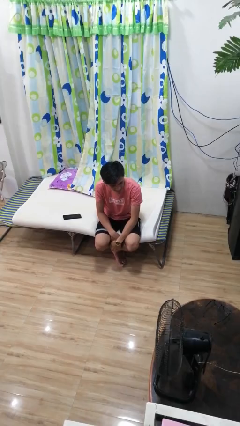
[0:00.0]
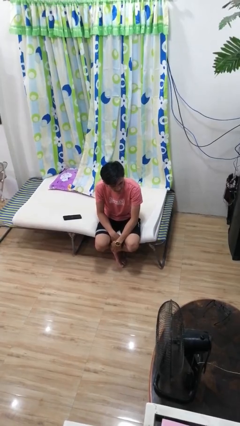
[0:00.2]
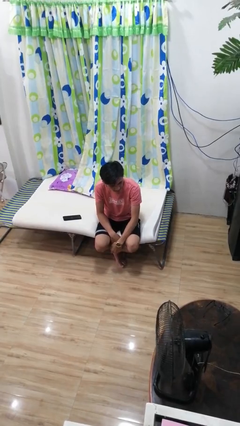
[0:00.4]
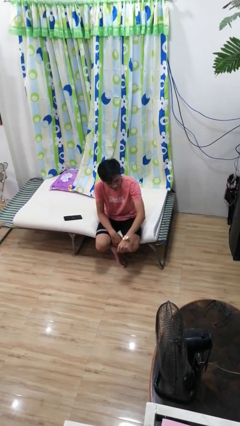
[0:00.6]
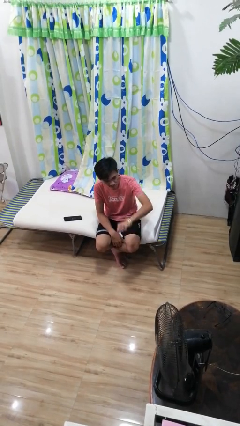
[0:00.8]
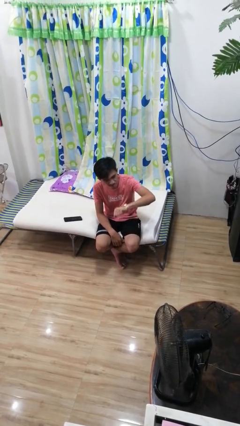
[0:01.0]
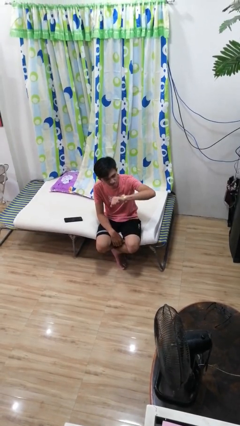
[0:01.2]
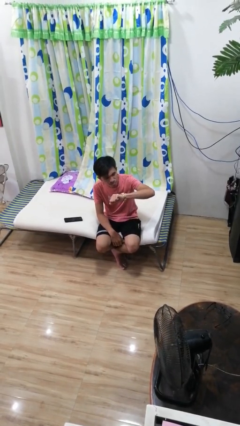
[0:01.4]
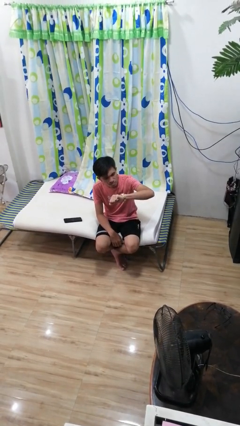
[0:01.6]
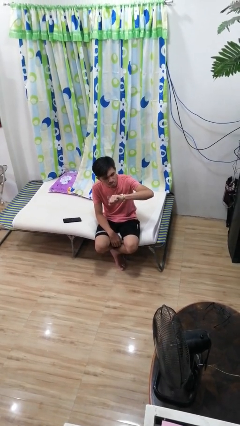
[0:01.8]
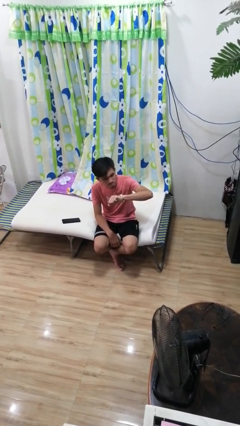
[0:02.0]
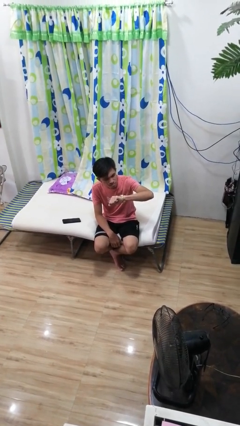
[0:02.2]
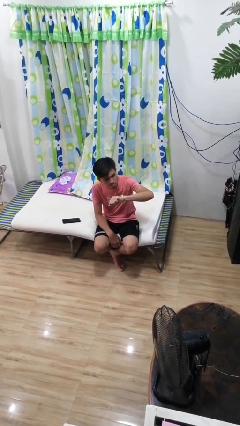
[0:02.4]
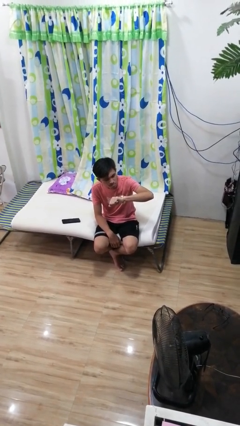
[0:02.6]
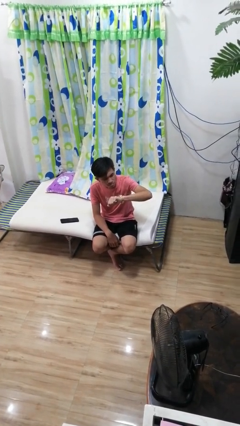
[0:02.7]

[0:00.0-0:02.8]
person looks at wristwatch

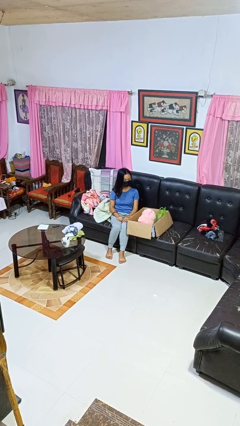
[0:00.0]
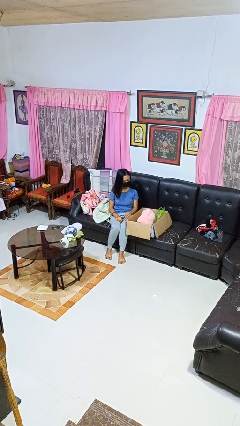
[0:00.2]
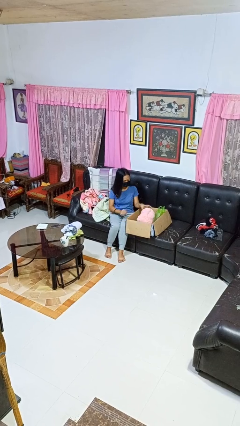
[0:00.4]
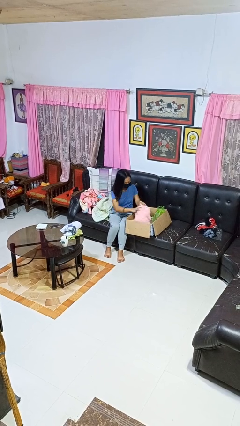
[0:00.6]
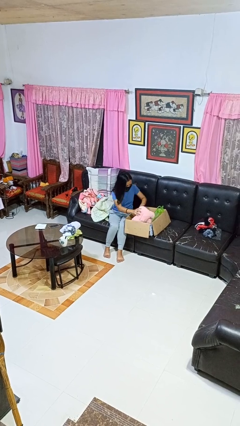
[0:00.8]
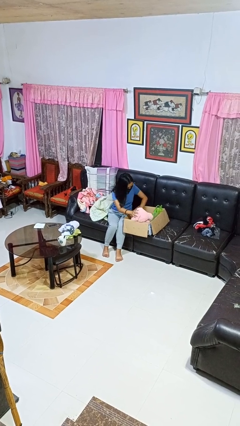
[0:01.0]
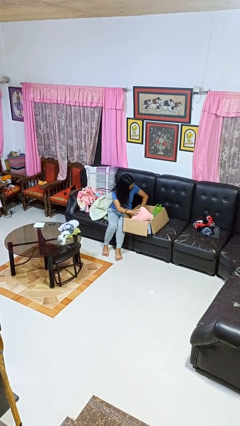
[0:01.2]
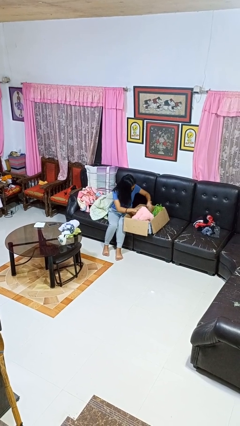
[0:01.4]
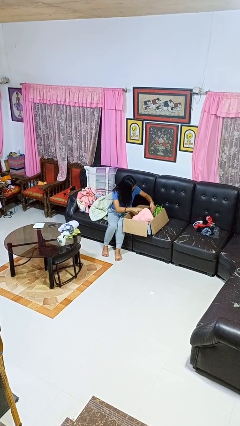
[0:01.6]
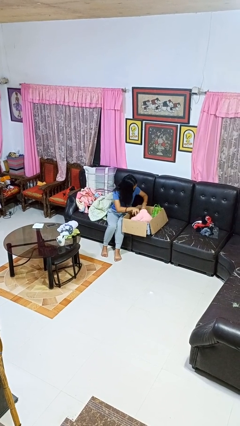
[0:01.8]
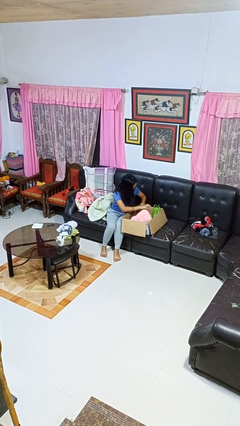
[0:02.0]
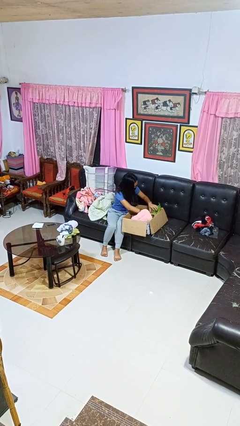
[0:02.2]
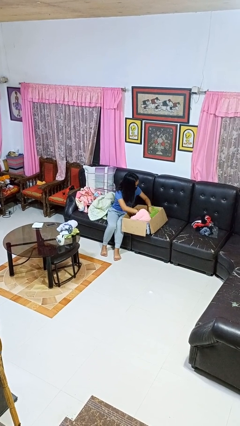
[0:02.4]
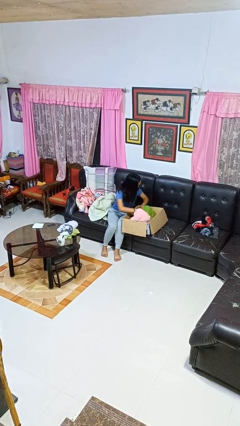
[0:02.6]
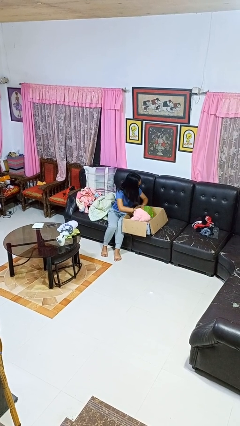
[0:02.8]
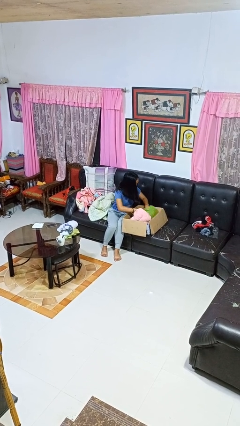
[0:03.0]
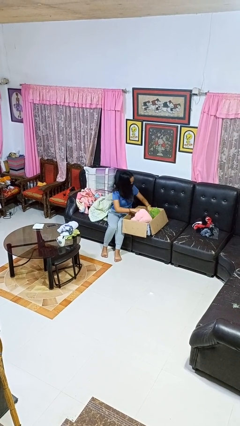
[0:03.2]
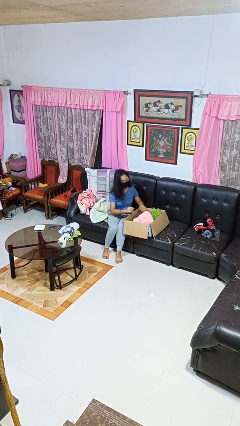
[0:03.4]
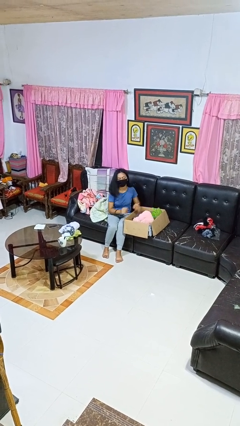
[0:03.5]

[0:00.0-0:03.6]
person searches in box

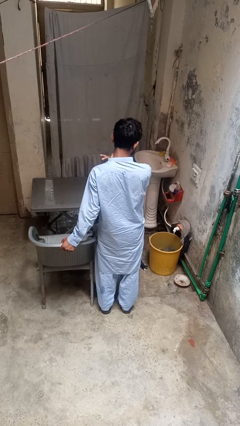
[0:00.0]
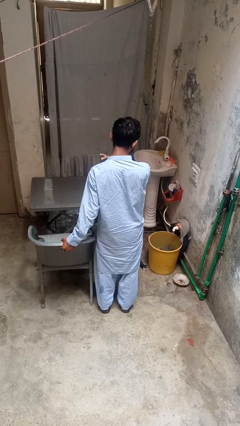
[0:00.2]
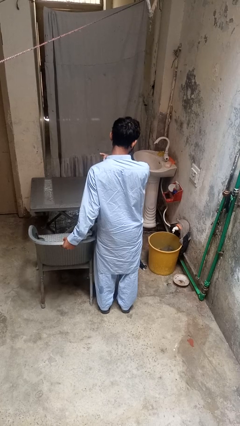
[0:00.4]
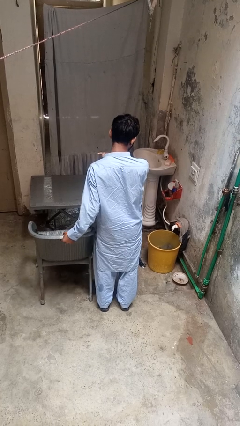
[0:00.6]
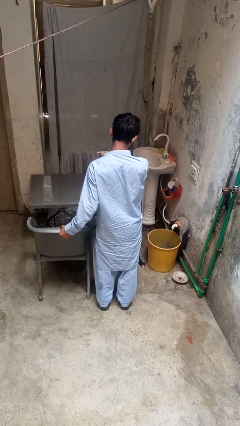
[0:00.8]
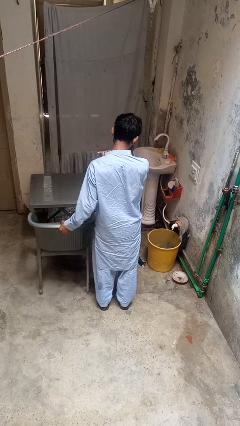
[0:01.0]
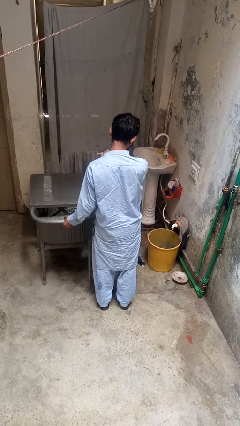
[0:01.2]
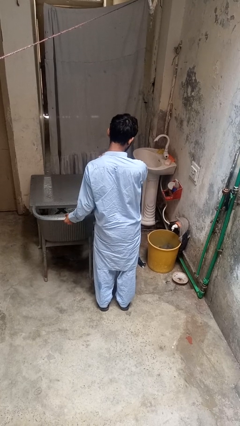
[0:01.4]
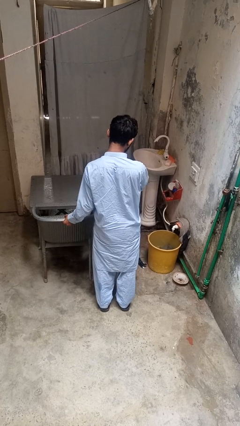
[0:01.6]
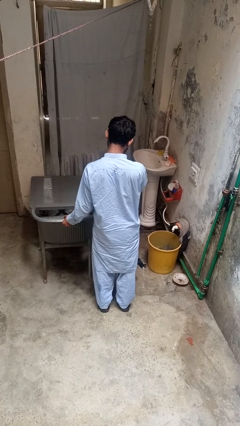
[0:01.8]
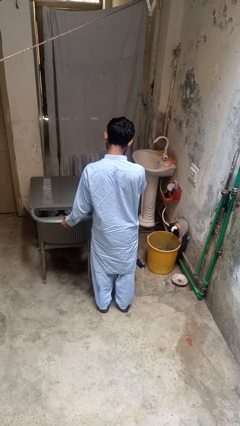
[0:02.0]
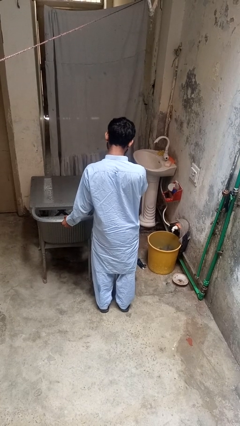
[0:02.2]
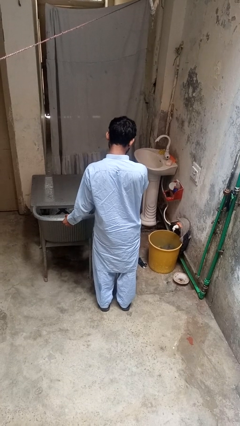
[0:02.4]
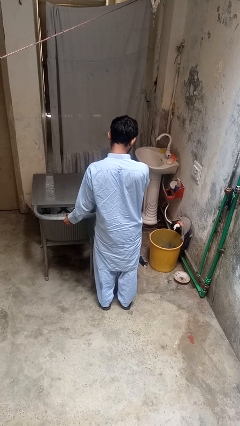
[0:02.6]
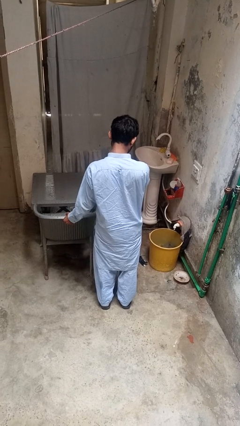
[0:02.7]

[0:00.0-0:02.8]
person pushes in chair

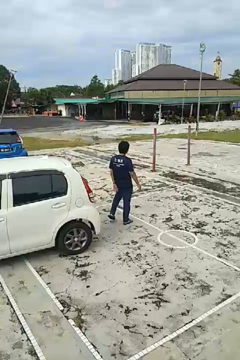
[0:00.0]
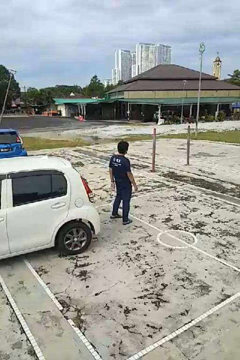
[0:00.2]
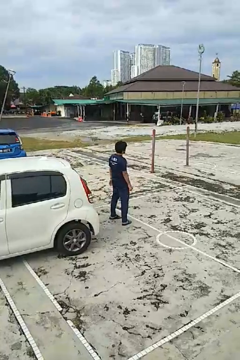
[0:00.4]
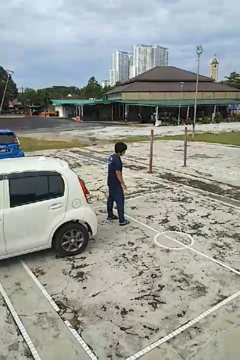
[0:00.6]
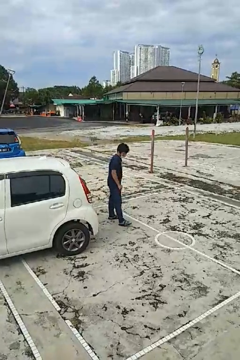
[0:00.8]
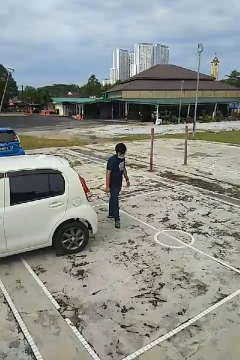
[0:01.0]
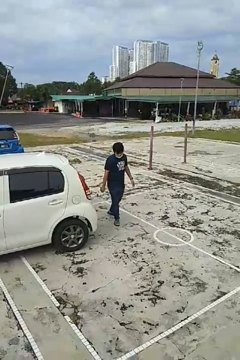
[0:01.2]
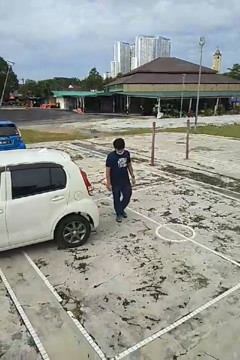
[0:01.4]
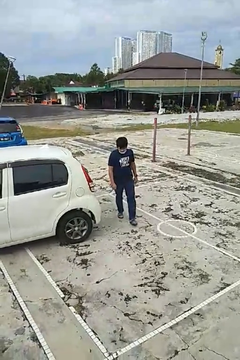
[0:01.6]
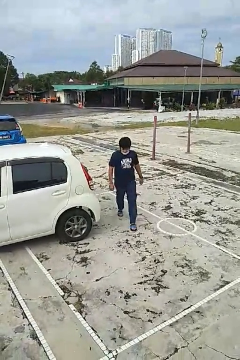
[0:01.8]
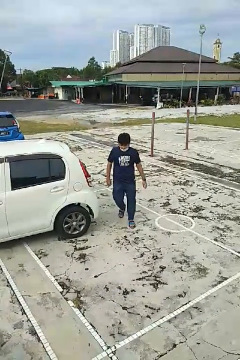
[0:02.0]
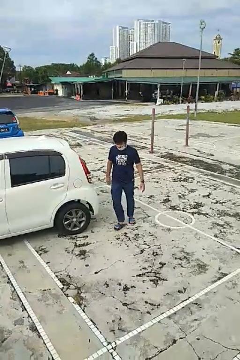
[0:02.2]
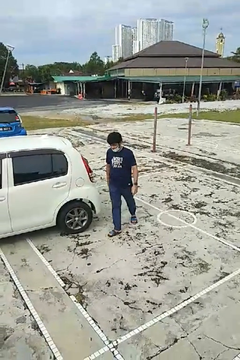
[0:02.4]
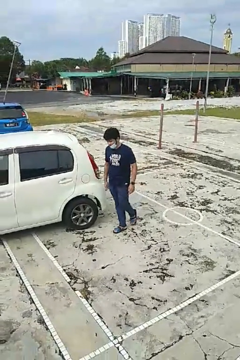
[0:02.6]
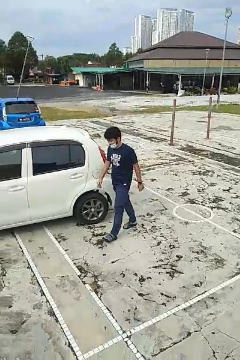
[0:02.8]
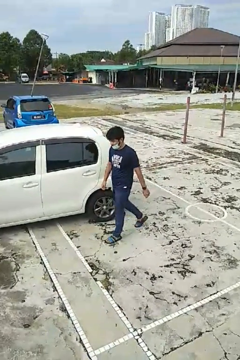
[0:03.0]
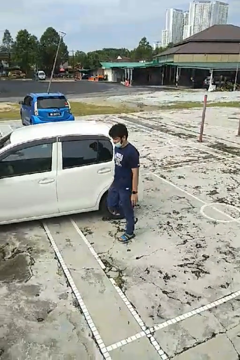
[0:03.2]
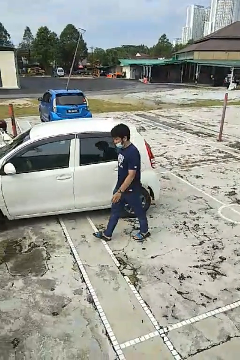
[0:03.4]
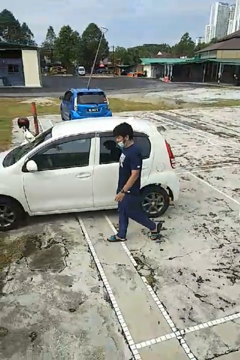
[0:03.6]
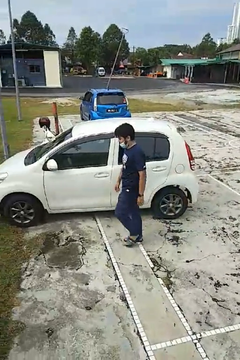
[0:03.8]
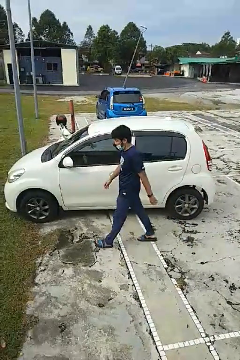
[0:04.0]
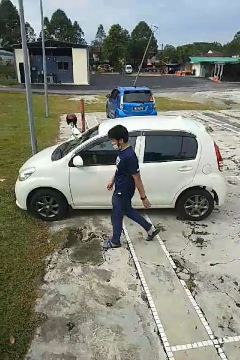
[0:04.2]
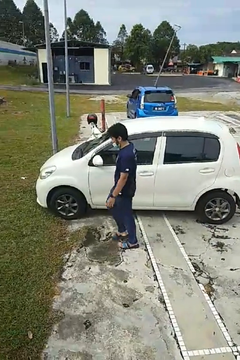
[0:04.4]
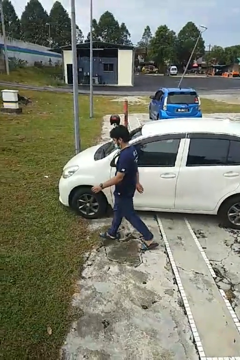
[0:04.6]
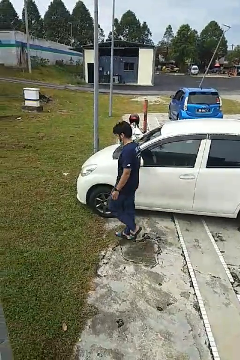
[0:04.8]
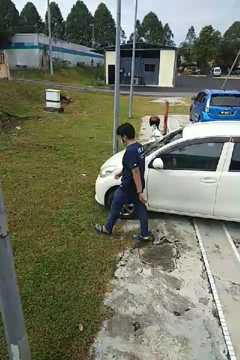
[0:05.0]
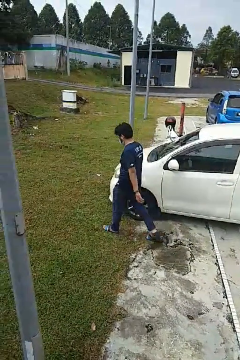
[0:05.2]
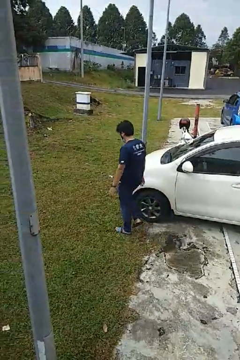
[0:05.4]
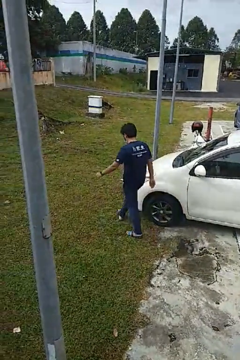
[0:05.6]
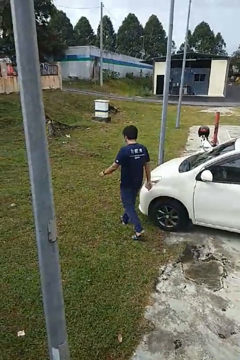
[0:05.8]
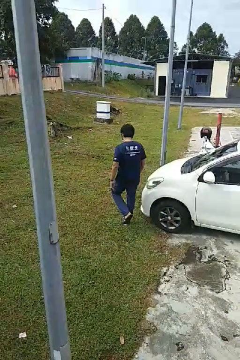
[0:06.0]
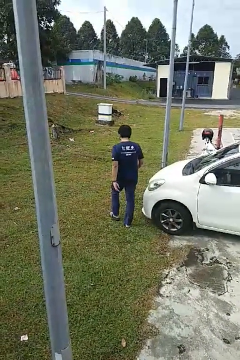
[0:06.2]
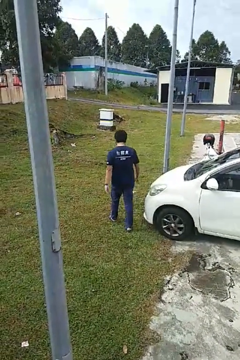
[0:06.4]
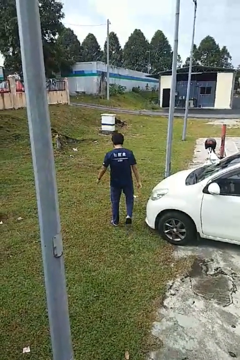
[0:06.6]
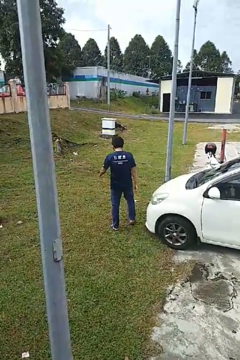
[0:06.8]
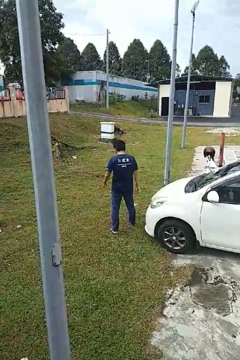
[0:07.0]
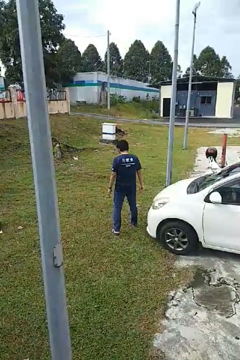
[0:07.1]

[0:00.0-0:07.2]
person walks around car

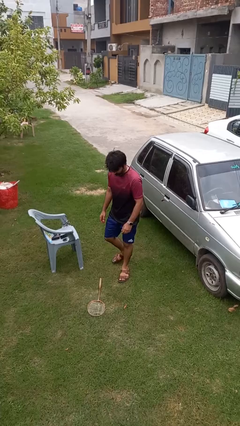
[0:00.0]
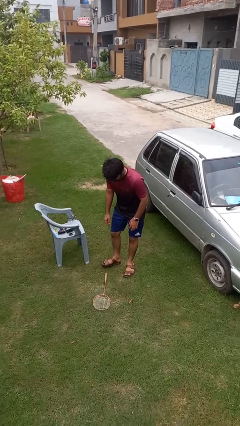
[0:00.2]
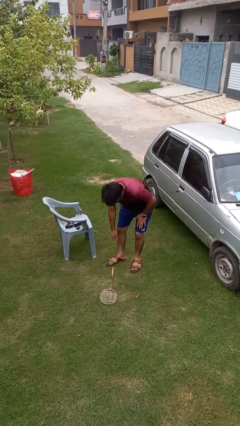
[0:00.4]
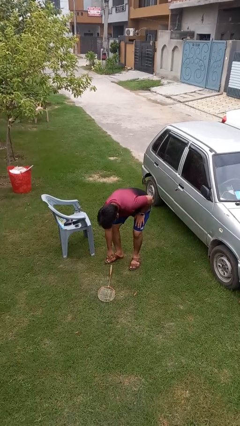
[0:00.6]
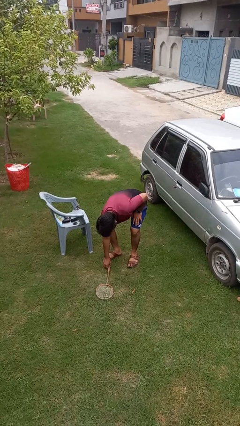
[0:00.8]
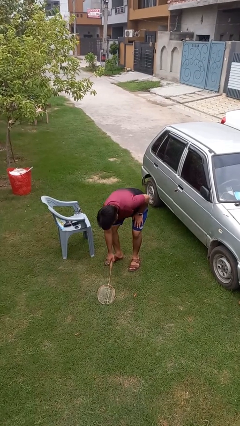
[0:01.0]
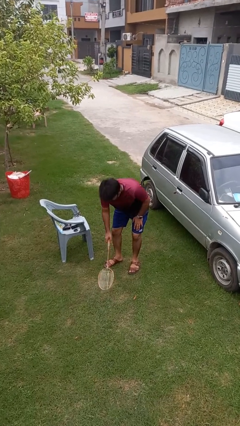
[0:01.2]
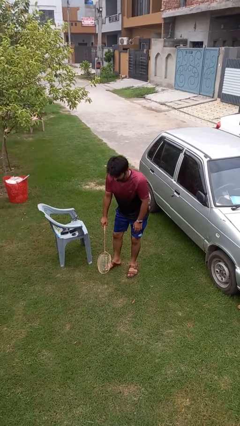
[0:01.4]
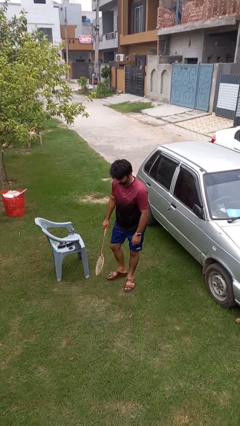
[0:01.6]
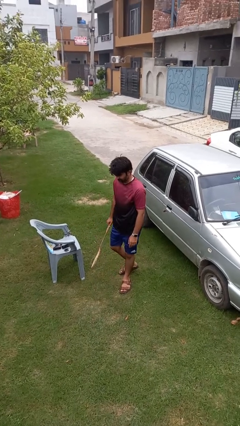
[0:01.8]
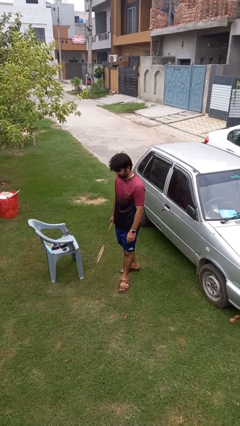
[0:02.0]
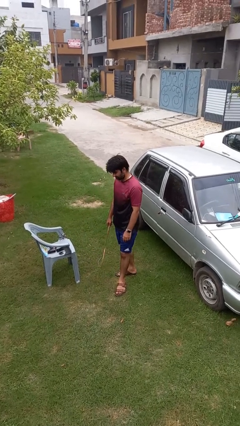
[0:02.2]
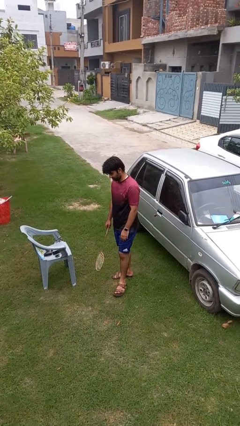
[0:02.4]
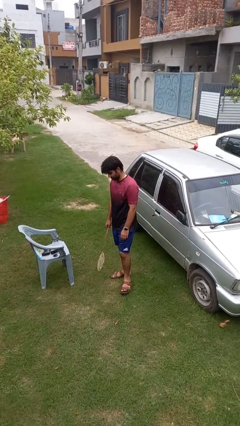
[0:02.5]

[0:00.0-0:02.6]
person picks up object from floor
